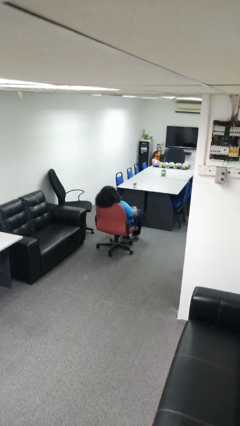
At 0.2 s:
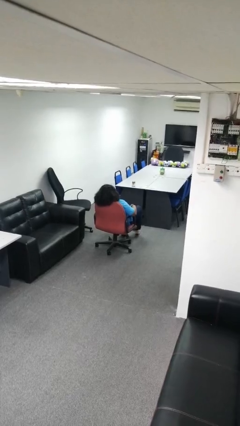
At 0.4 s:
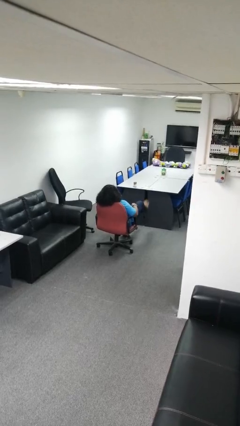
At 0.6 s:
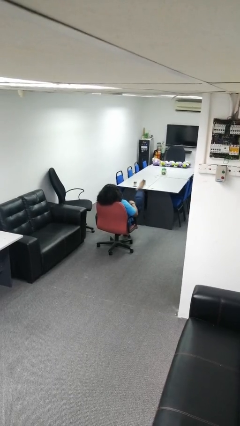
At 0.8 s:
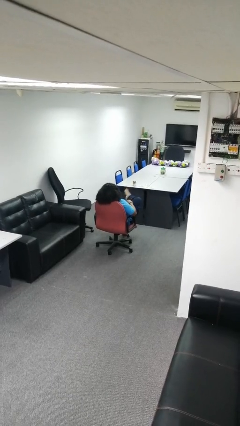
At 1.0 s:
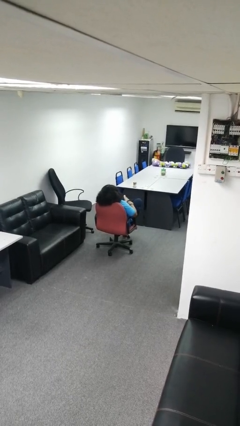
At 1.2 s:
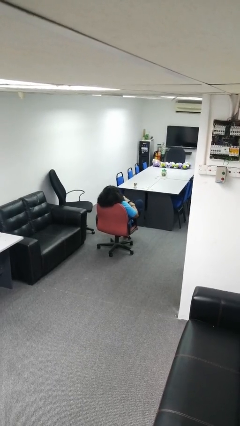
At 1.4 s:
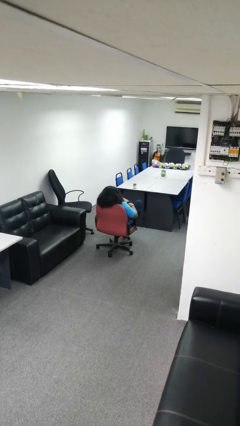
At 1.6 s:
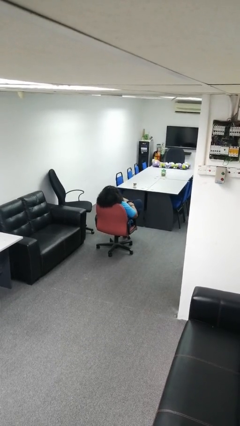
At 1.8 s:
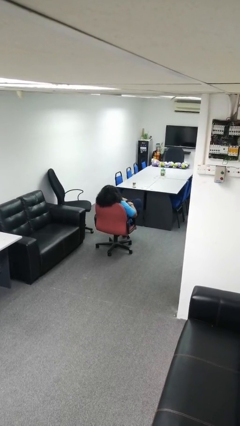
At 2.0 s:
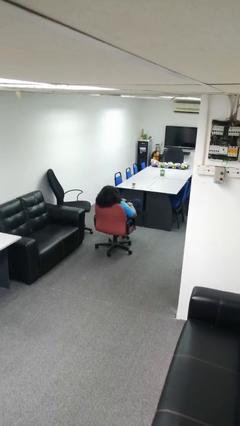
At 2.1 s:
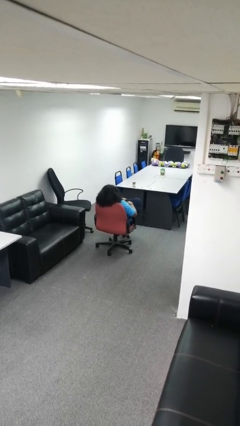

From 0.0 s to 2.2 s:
person crosses legs

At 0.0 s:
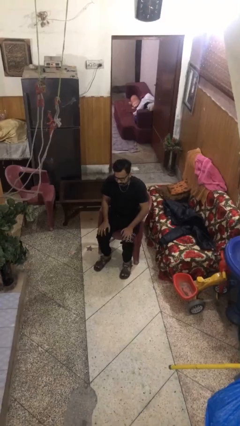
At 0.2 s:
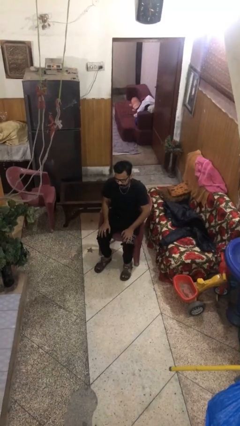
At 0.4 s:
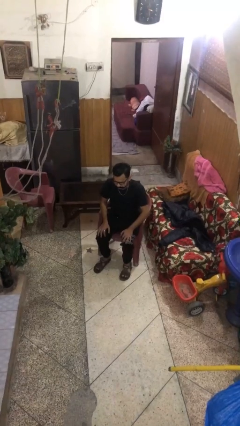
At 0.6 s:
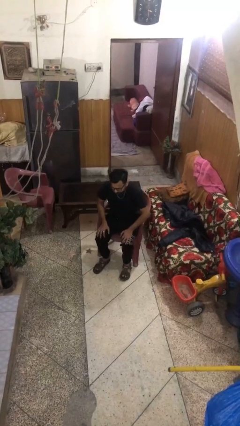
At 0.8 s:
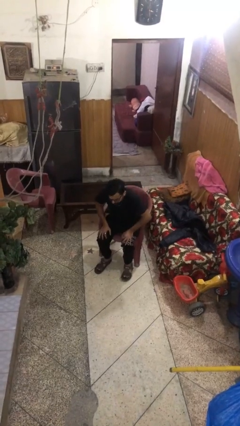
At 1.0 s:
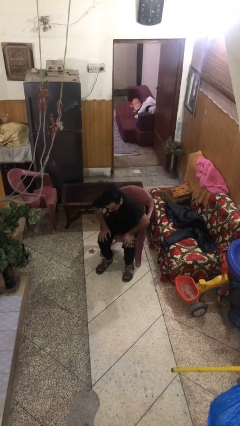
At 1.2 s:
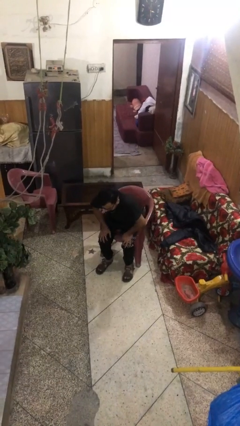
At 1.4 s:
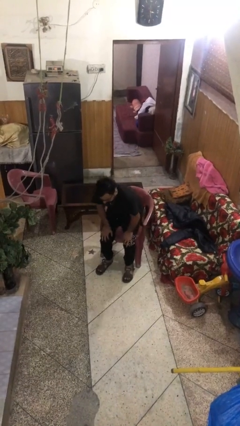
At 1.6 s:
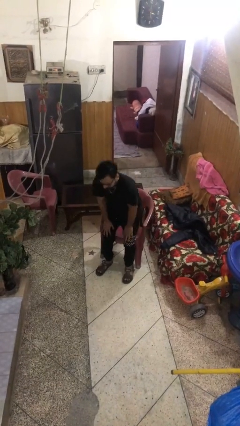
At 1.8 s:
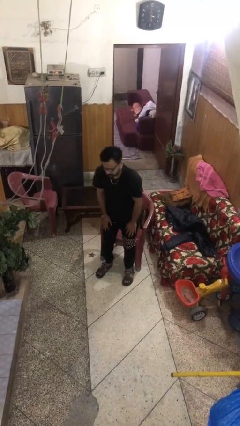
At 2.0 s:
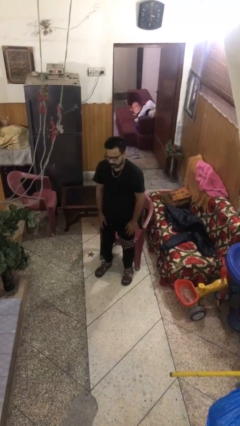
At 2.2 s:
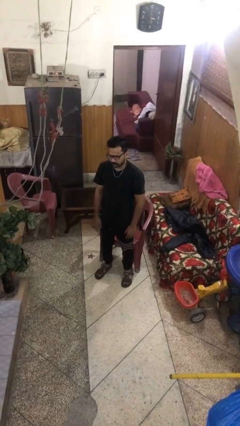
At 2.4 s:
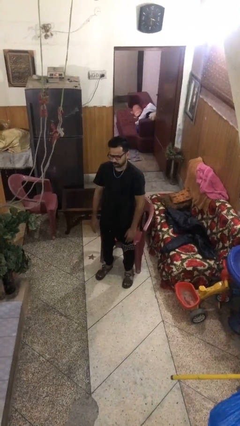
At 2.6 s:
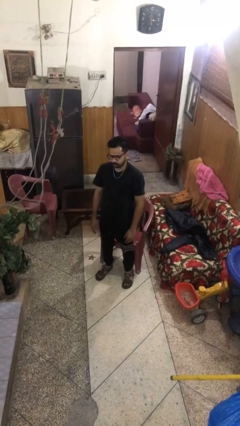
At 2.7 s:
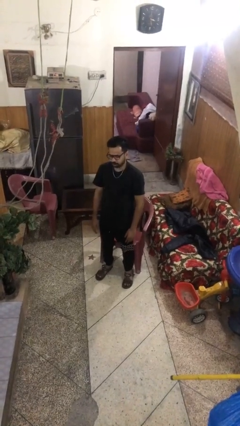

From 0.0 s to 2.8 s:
person stands up

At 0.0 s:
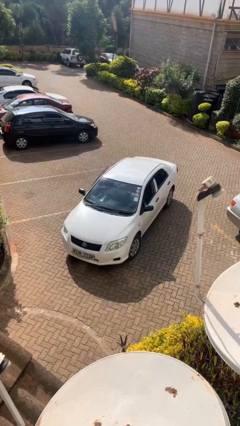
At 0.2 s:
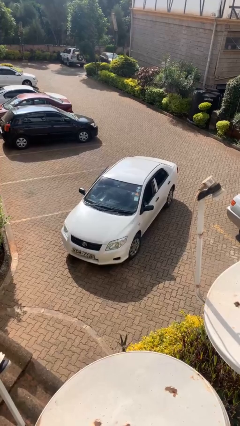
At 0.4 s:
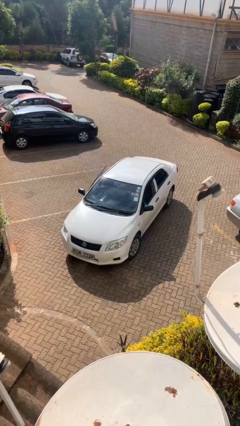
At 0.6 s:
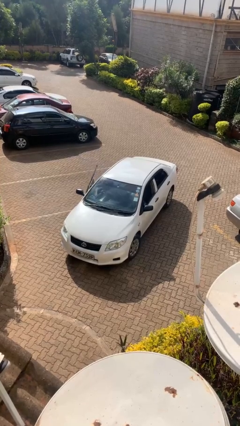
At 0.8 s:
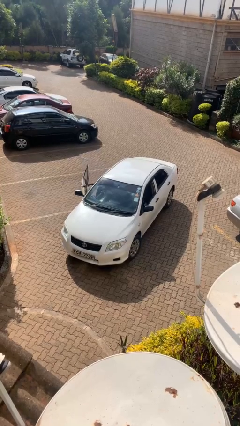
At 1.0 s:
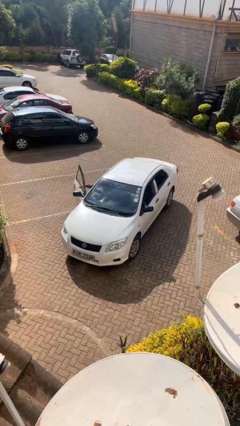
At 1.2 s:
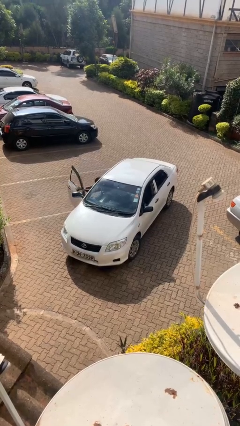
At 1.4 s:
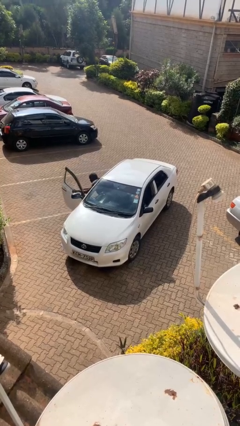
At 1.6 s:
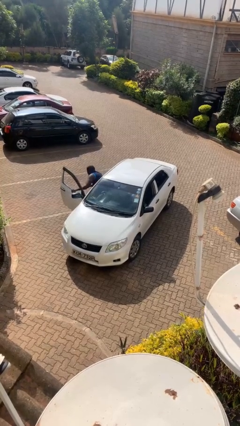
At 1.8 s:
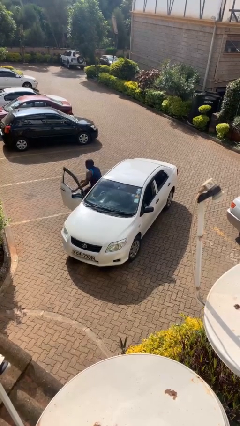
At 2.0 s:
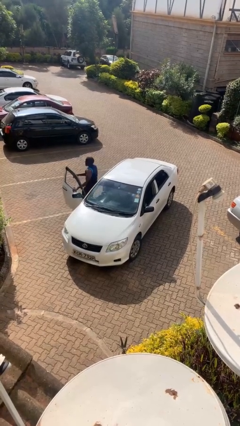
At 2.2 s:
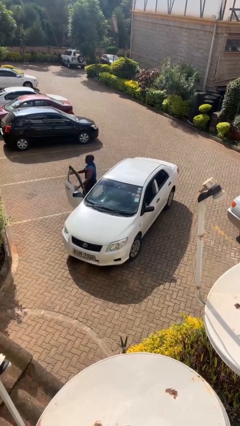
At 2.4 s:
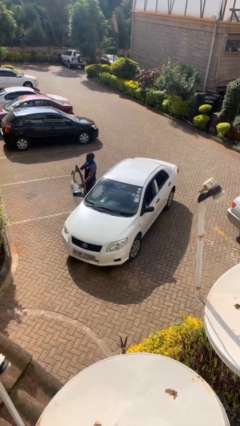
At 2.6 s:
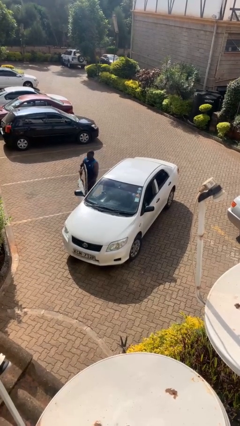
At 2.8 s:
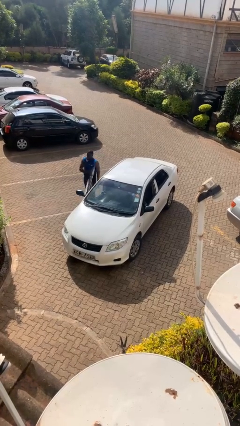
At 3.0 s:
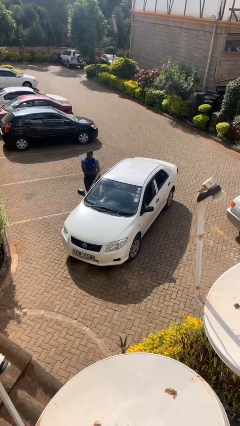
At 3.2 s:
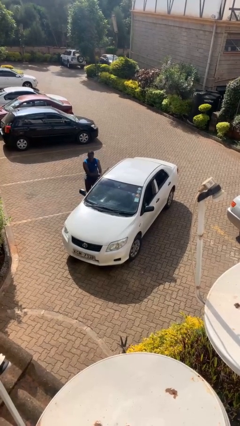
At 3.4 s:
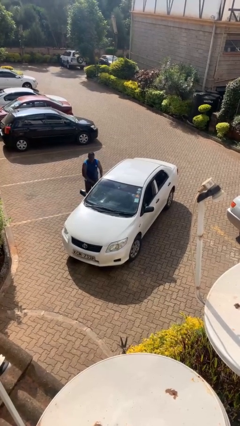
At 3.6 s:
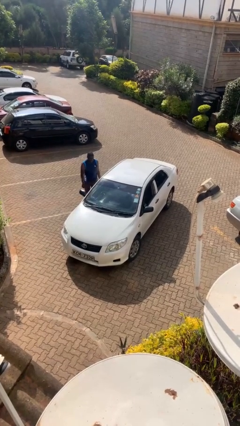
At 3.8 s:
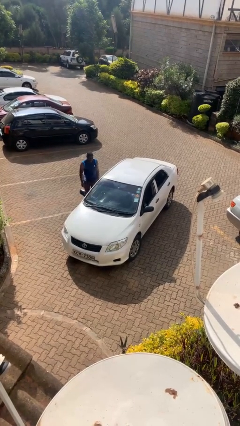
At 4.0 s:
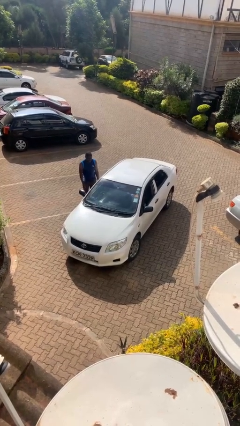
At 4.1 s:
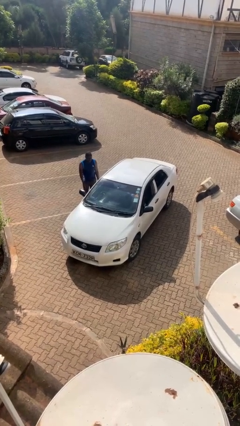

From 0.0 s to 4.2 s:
car drops off person

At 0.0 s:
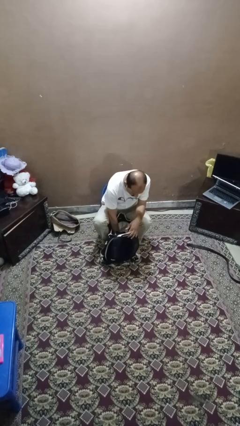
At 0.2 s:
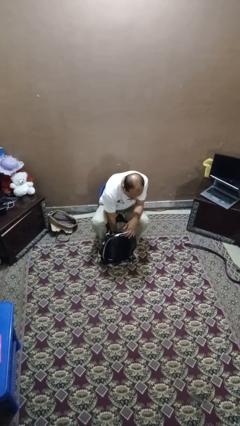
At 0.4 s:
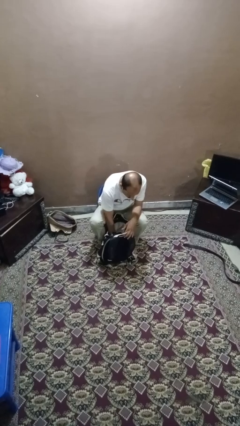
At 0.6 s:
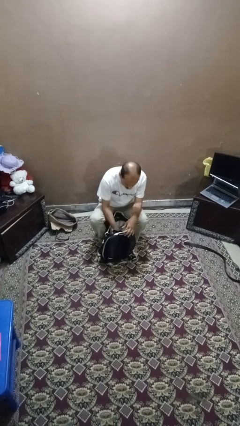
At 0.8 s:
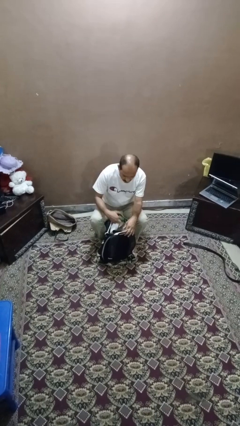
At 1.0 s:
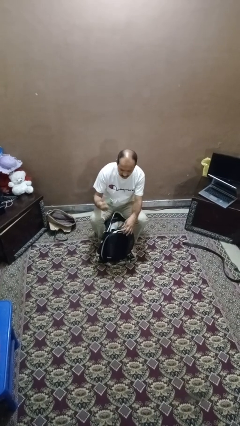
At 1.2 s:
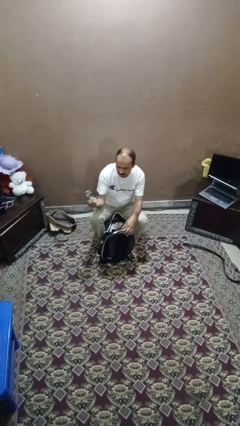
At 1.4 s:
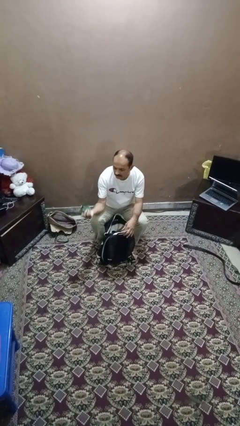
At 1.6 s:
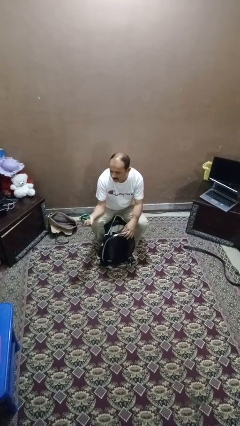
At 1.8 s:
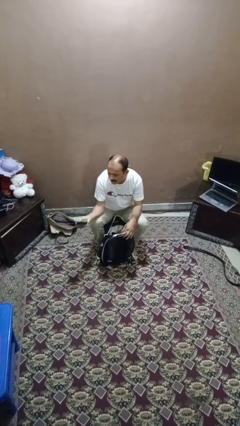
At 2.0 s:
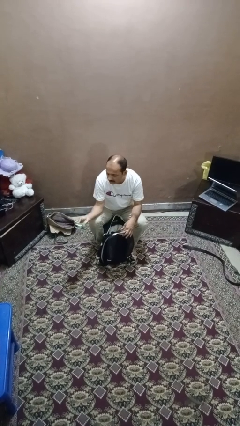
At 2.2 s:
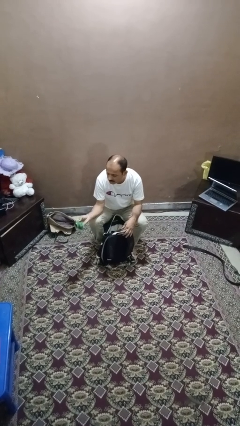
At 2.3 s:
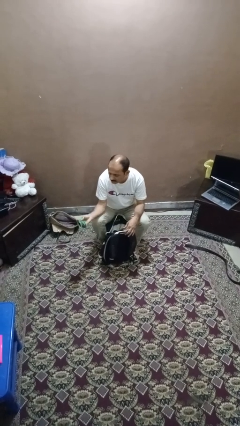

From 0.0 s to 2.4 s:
person takes object from backpack

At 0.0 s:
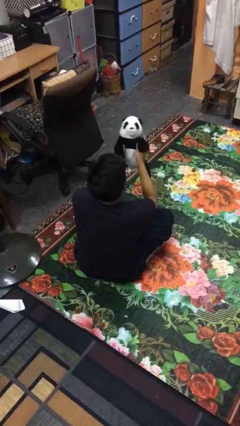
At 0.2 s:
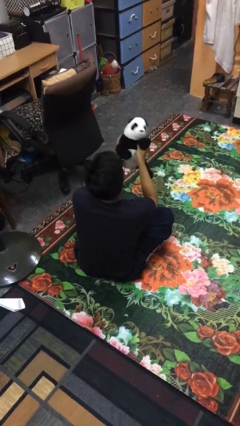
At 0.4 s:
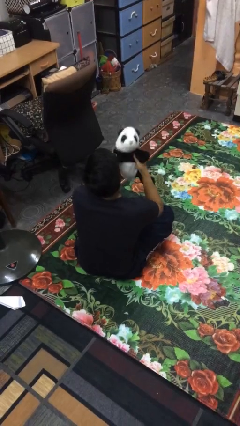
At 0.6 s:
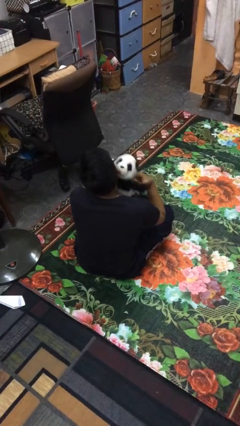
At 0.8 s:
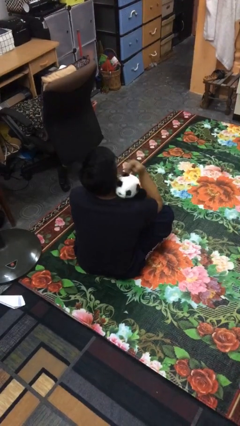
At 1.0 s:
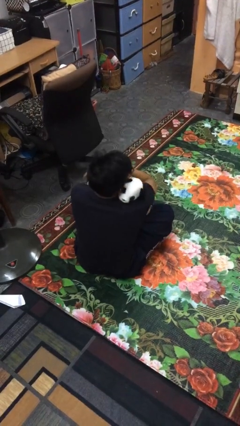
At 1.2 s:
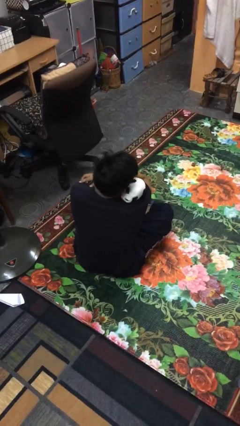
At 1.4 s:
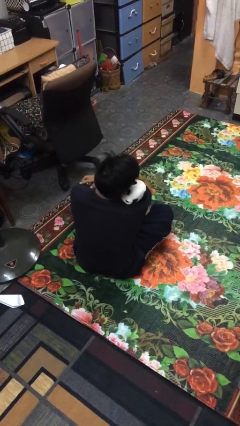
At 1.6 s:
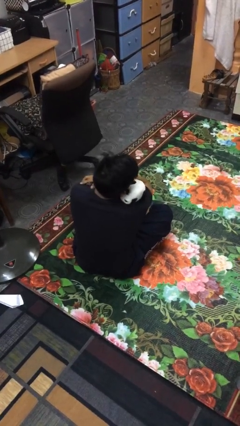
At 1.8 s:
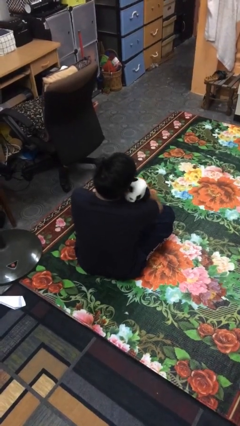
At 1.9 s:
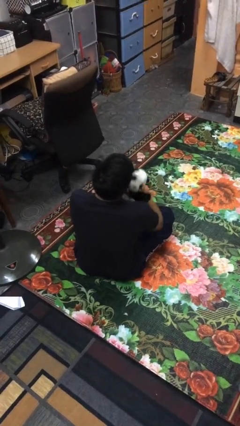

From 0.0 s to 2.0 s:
person hugs stuffed animal

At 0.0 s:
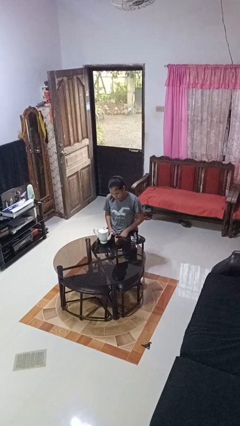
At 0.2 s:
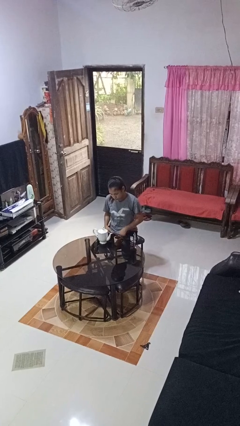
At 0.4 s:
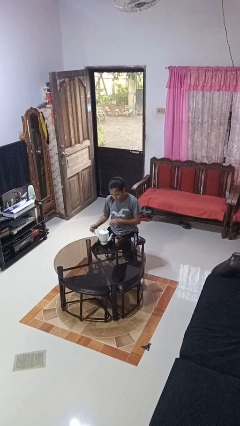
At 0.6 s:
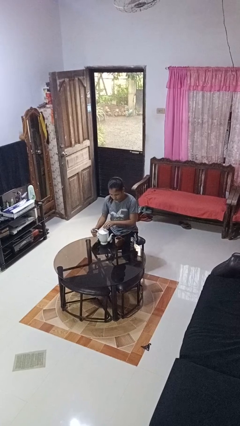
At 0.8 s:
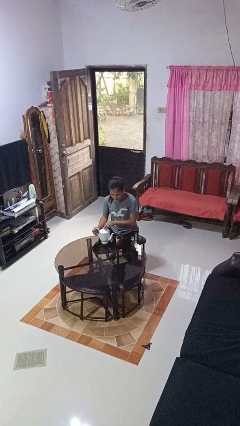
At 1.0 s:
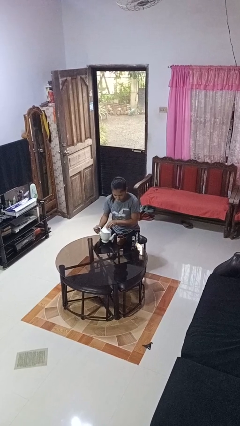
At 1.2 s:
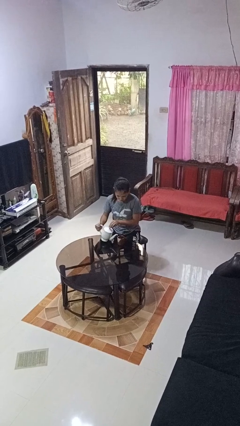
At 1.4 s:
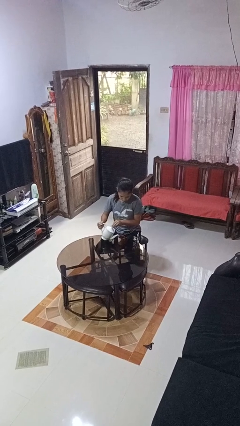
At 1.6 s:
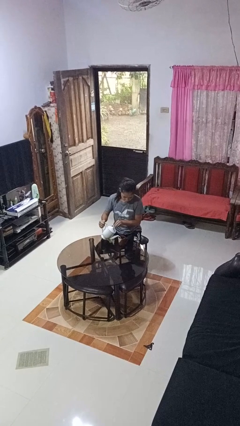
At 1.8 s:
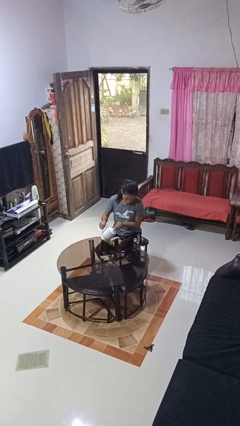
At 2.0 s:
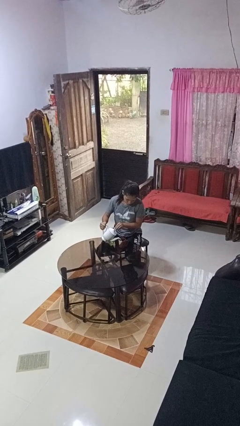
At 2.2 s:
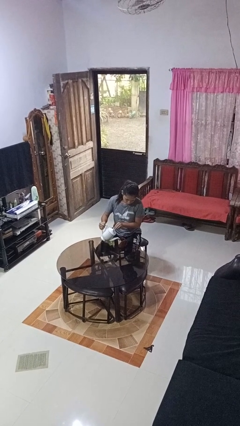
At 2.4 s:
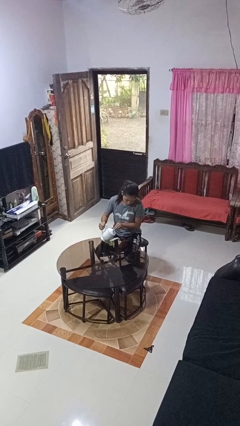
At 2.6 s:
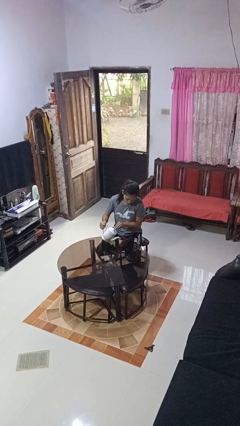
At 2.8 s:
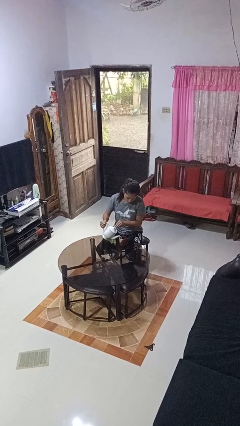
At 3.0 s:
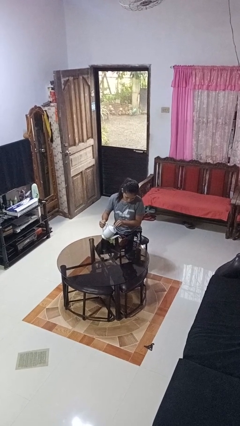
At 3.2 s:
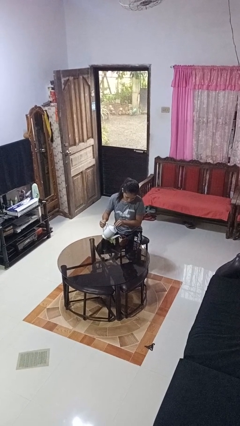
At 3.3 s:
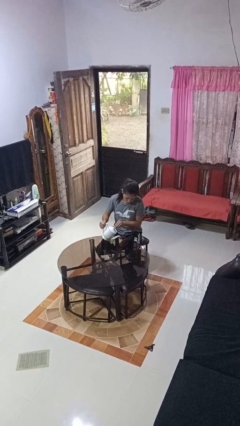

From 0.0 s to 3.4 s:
person pours coffee into mug
